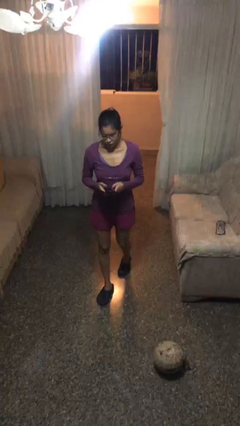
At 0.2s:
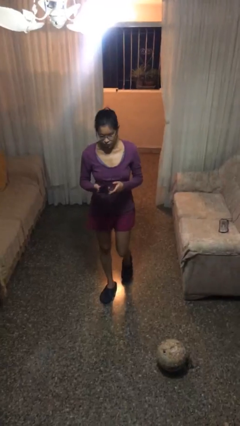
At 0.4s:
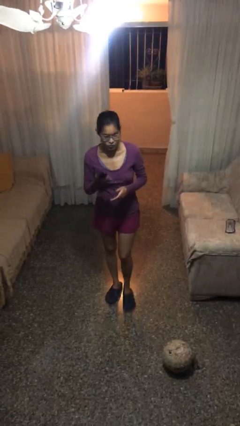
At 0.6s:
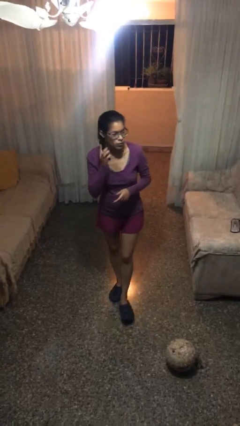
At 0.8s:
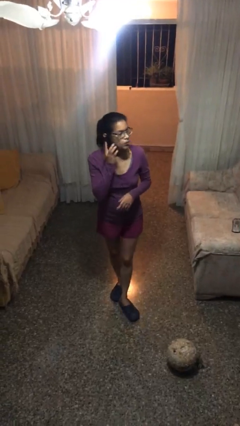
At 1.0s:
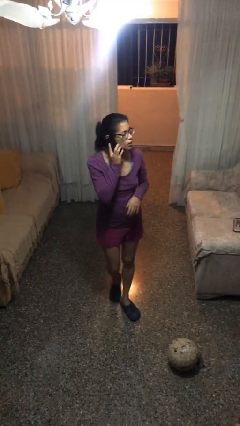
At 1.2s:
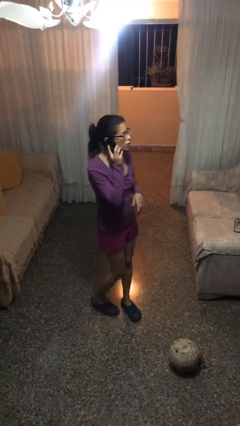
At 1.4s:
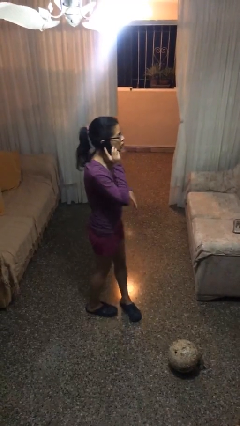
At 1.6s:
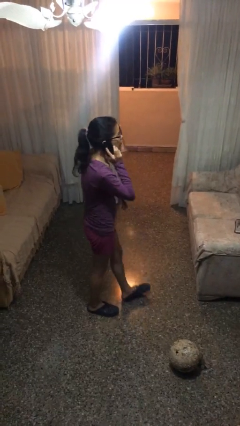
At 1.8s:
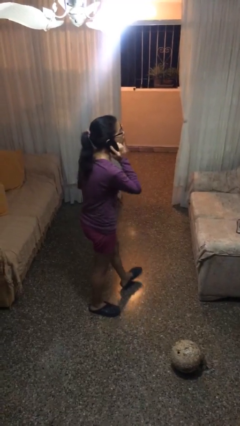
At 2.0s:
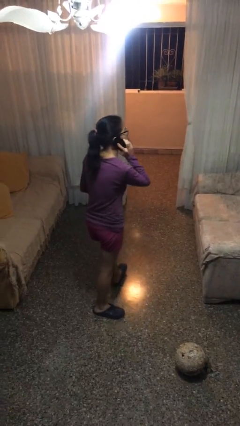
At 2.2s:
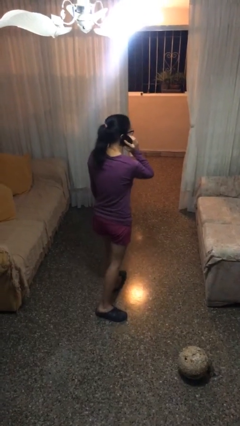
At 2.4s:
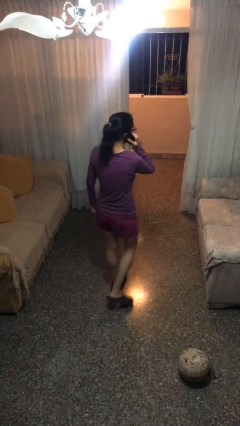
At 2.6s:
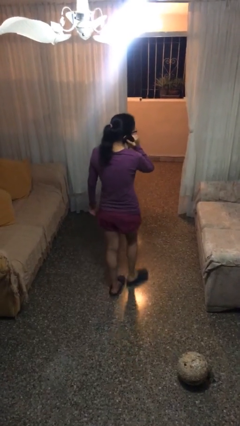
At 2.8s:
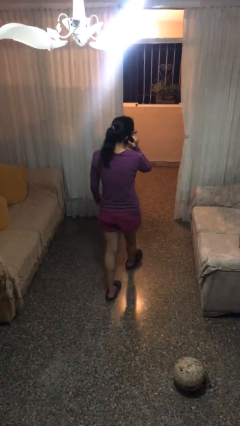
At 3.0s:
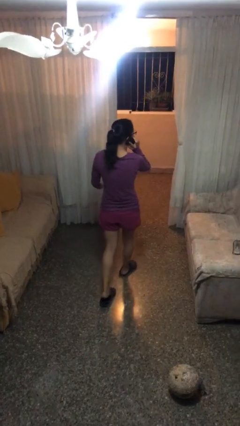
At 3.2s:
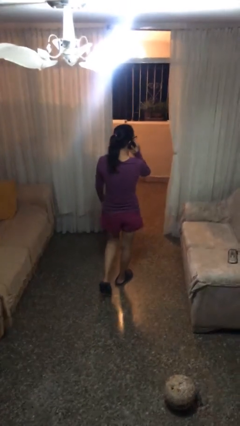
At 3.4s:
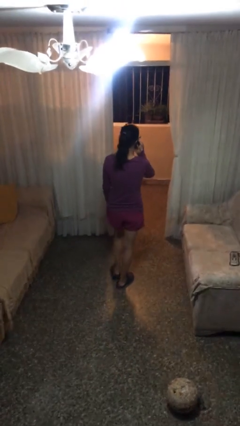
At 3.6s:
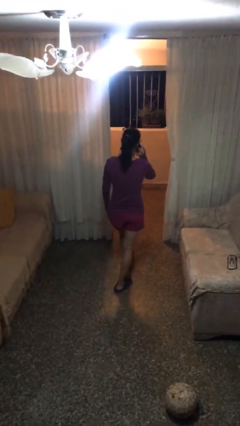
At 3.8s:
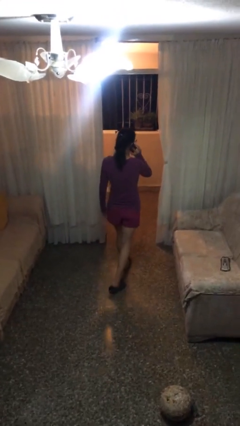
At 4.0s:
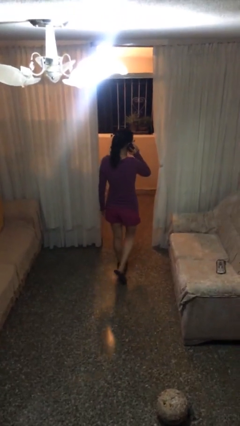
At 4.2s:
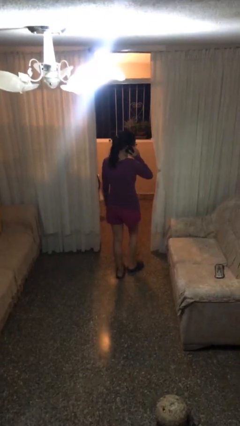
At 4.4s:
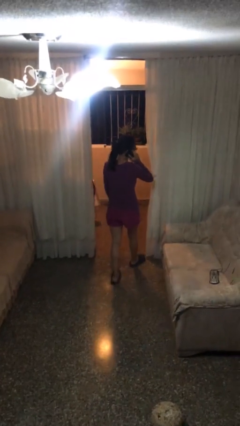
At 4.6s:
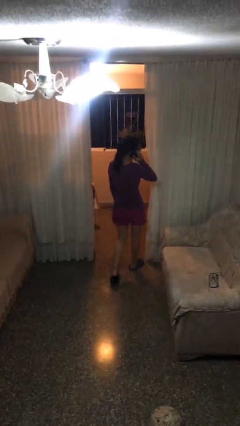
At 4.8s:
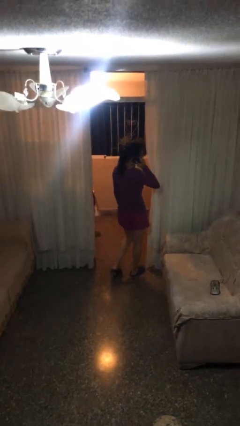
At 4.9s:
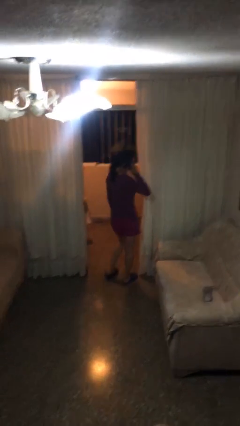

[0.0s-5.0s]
person talks on phone

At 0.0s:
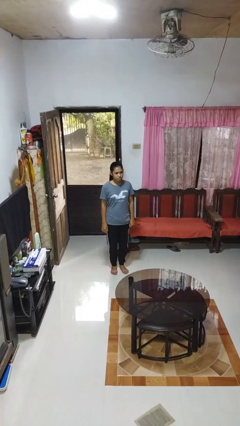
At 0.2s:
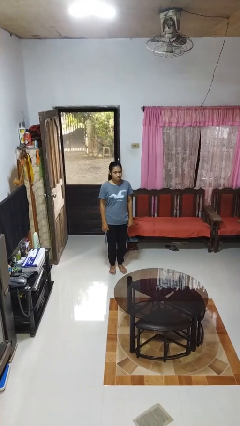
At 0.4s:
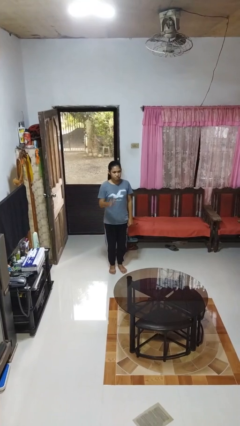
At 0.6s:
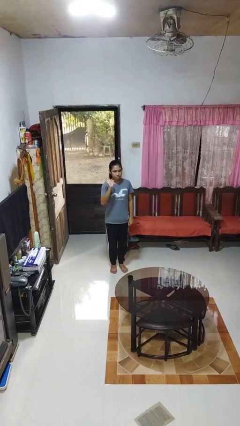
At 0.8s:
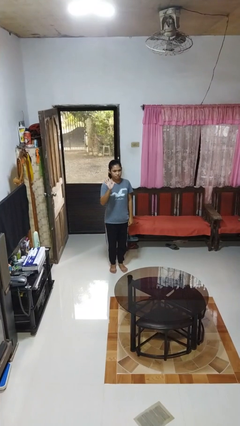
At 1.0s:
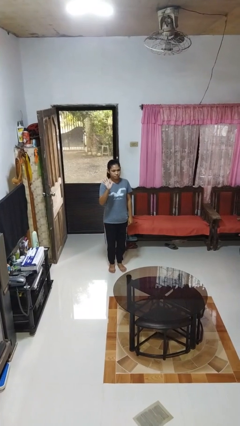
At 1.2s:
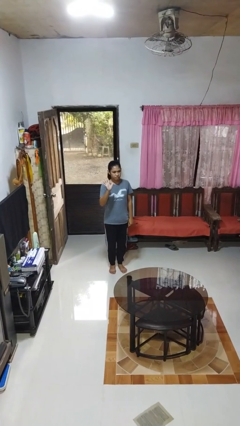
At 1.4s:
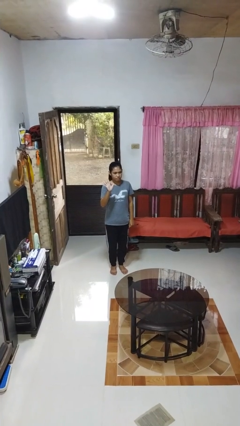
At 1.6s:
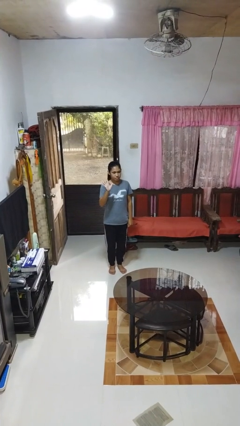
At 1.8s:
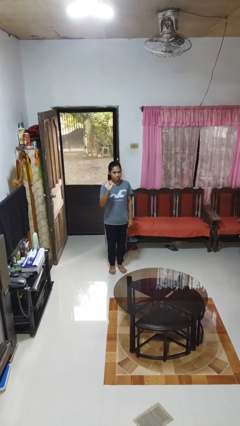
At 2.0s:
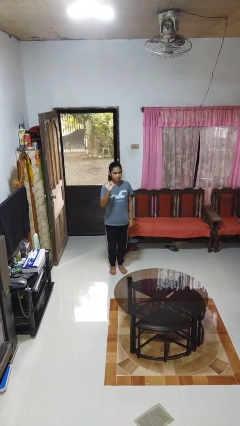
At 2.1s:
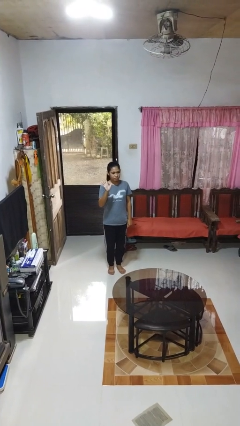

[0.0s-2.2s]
person gestures number five

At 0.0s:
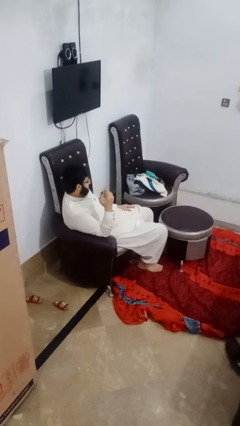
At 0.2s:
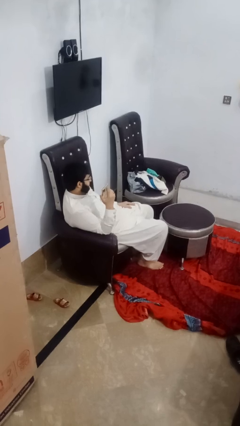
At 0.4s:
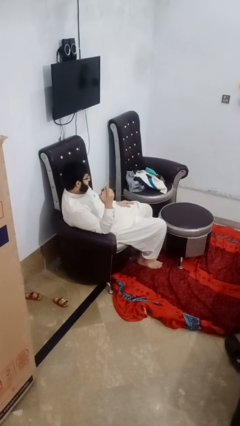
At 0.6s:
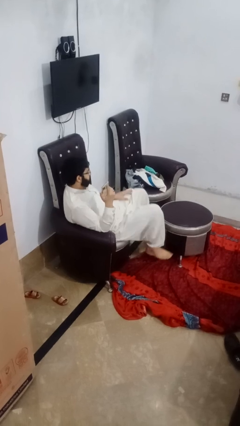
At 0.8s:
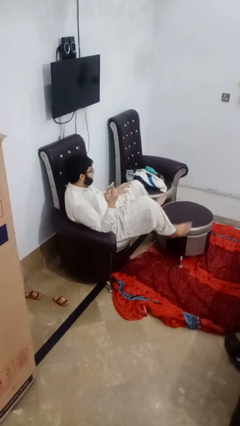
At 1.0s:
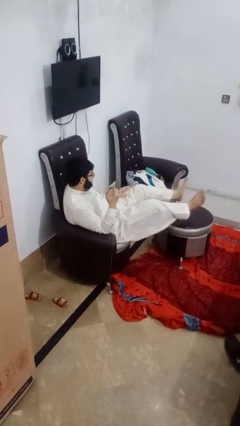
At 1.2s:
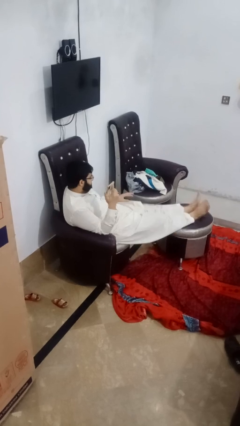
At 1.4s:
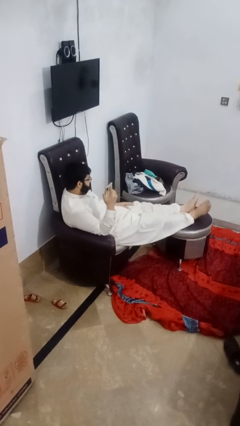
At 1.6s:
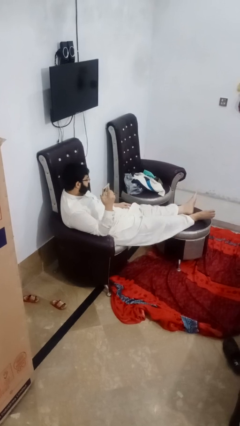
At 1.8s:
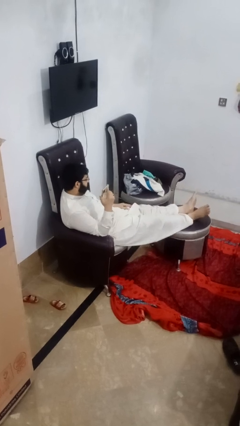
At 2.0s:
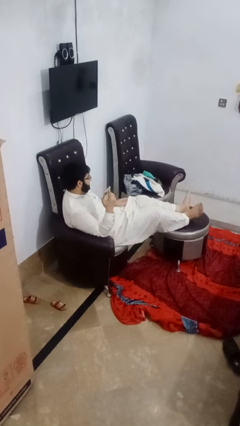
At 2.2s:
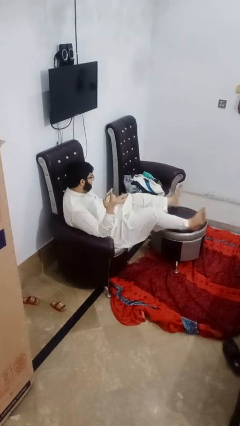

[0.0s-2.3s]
person puts feet up

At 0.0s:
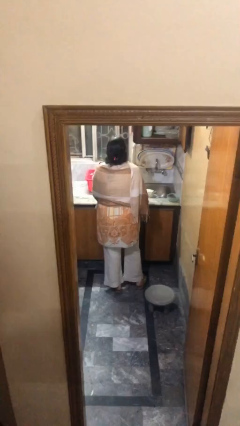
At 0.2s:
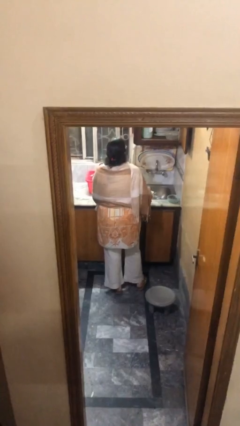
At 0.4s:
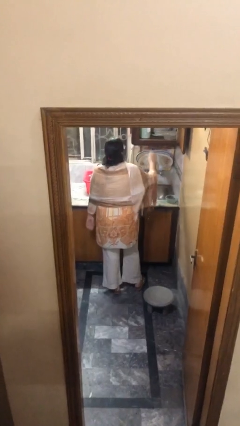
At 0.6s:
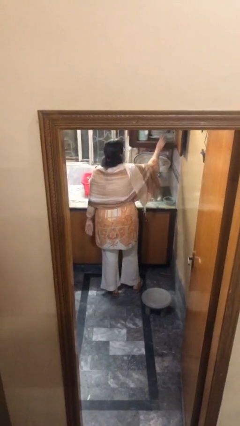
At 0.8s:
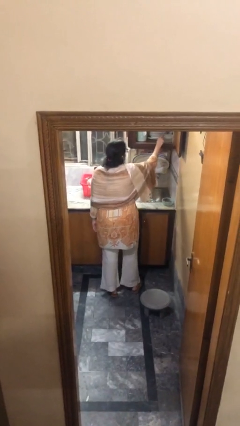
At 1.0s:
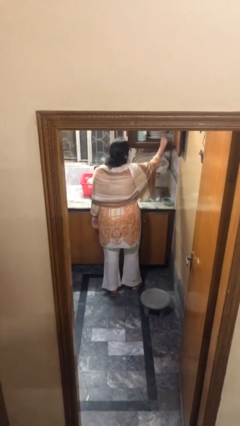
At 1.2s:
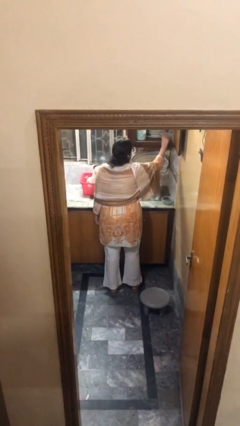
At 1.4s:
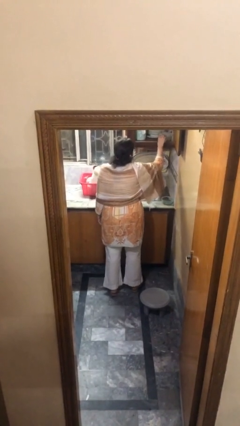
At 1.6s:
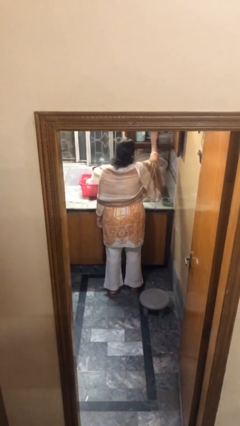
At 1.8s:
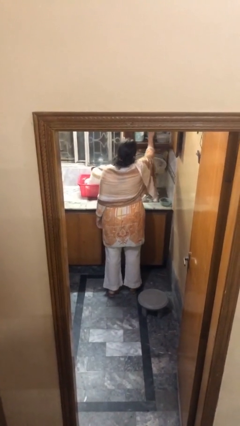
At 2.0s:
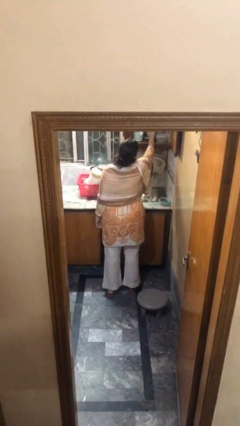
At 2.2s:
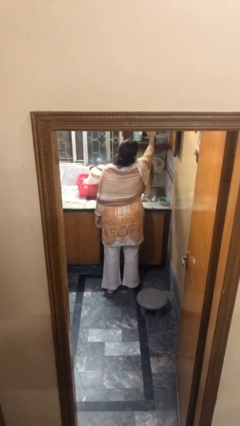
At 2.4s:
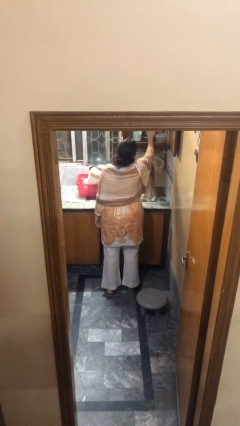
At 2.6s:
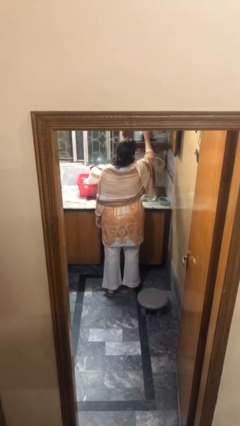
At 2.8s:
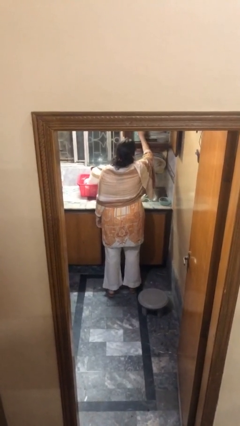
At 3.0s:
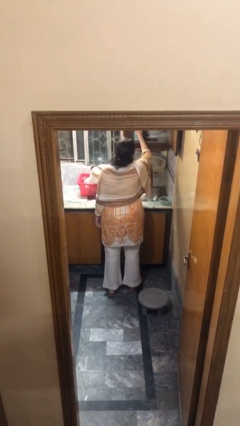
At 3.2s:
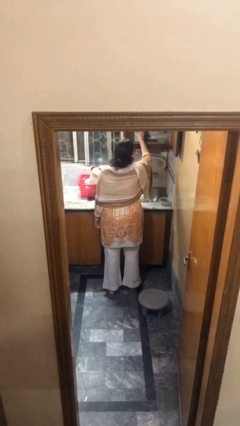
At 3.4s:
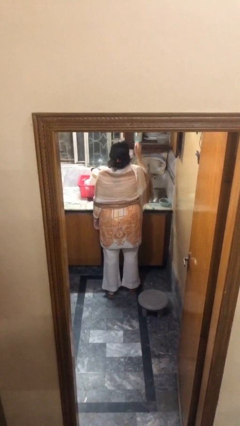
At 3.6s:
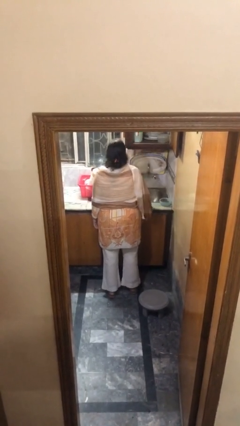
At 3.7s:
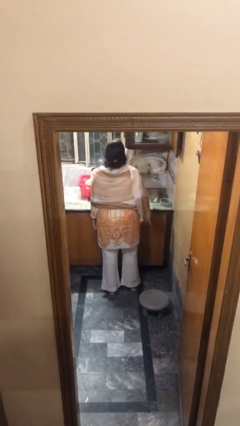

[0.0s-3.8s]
person searches in kitchen drawer

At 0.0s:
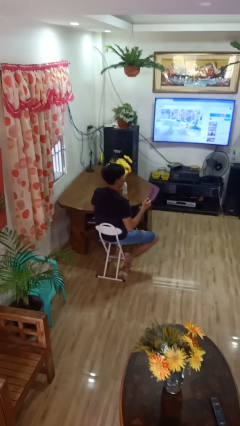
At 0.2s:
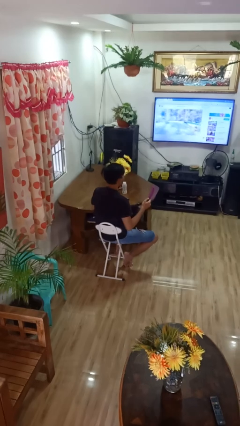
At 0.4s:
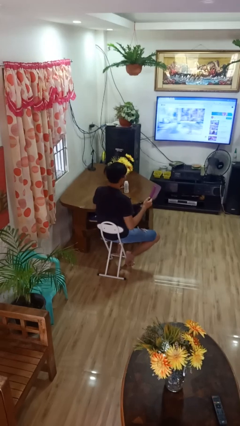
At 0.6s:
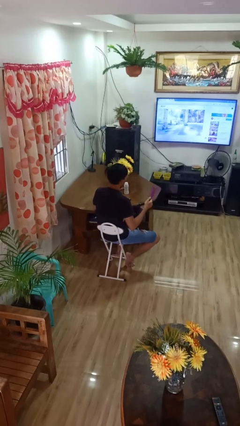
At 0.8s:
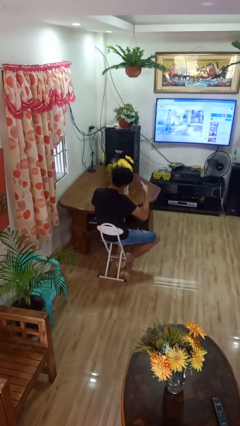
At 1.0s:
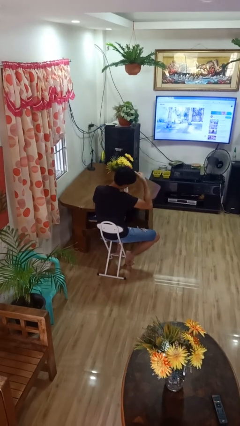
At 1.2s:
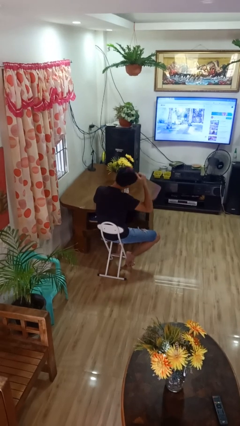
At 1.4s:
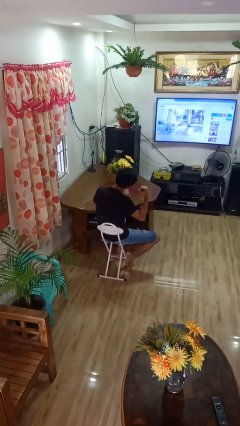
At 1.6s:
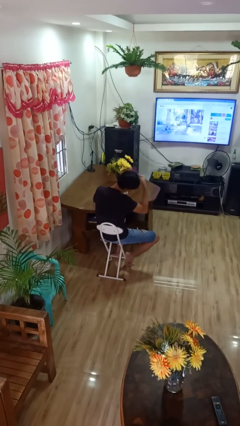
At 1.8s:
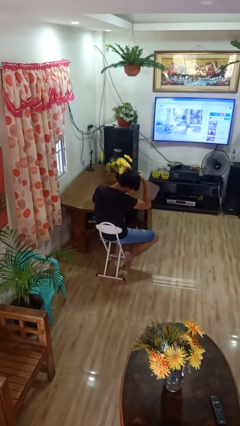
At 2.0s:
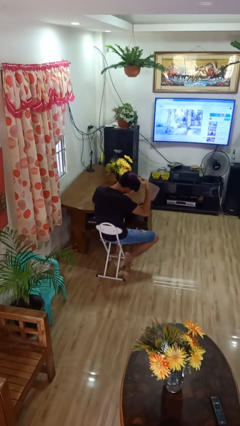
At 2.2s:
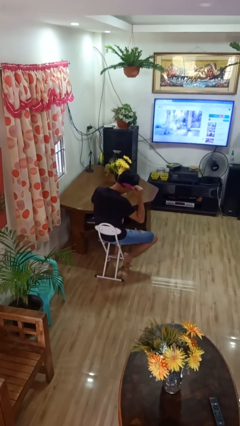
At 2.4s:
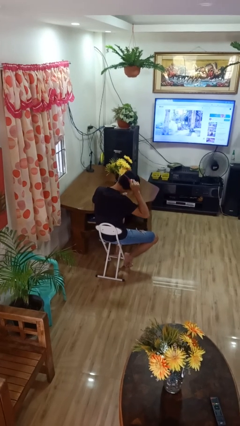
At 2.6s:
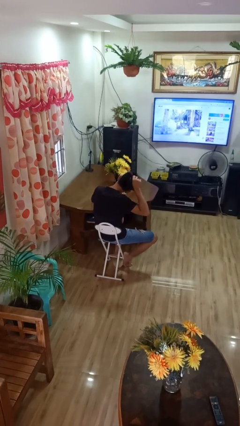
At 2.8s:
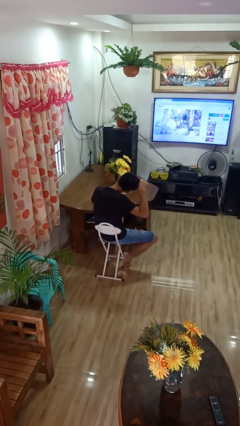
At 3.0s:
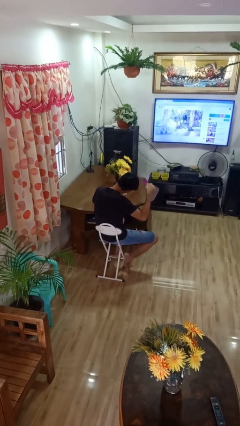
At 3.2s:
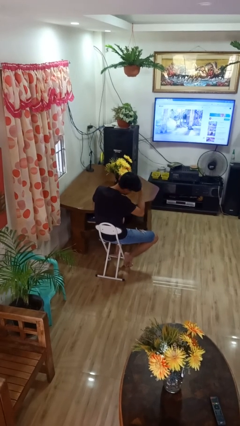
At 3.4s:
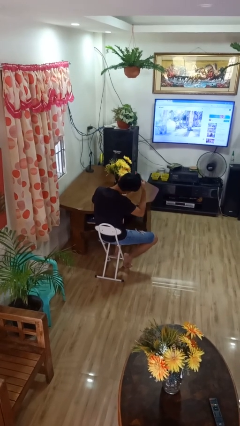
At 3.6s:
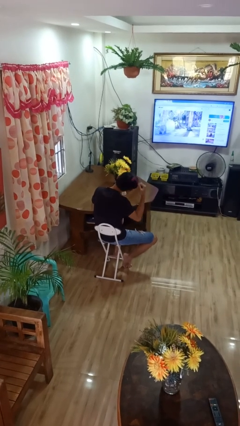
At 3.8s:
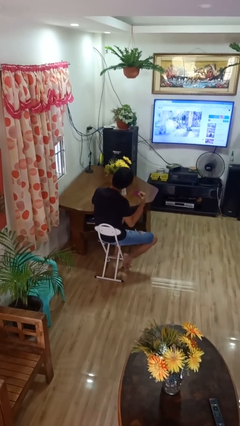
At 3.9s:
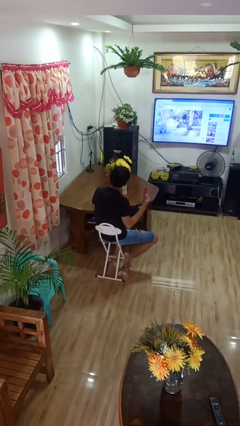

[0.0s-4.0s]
person brushes hair

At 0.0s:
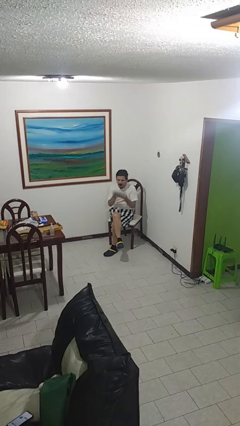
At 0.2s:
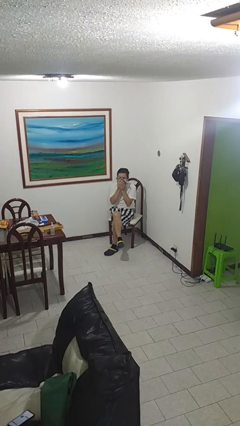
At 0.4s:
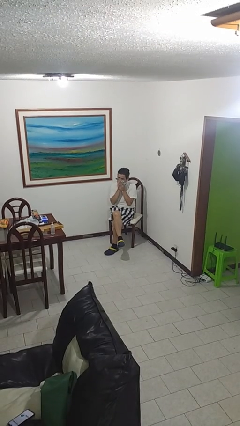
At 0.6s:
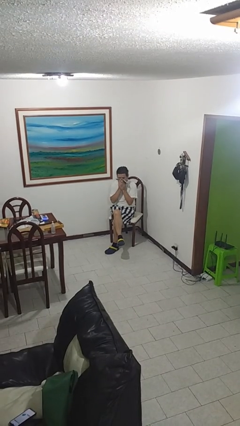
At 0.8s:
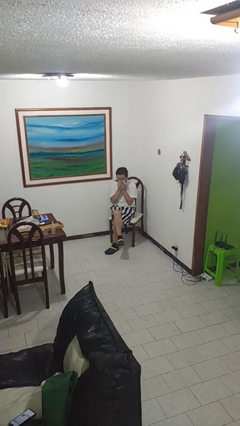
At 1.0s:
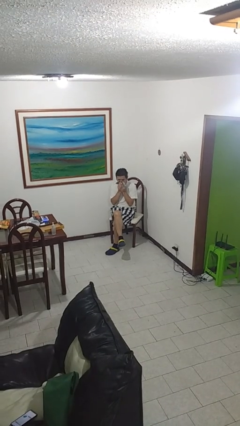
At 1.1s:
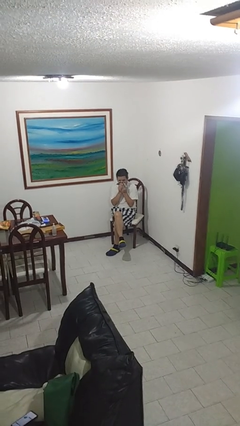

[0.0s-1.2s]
person blows nose
